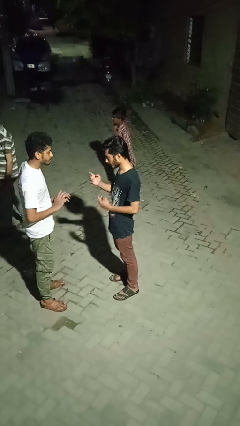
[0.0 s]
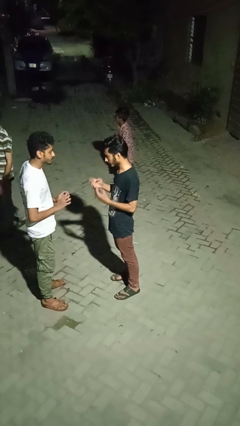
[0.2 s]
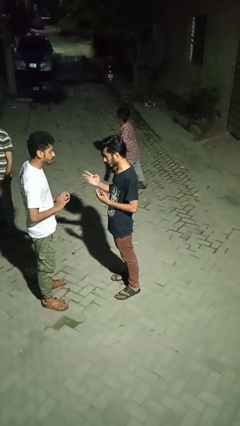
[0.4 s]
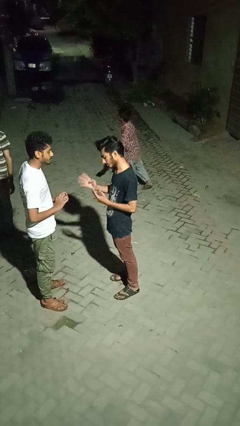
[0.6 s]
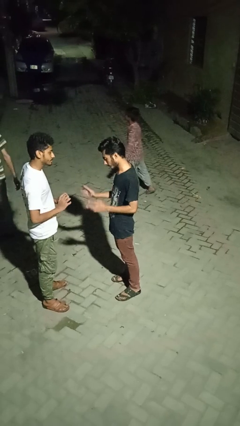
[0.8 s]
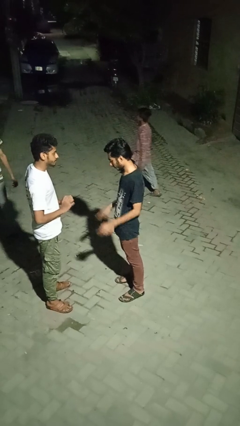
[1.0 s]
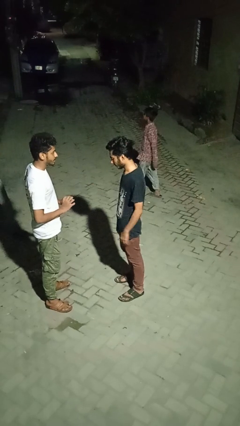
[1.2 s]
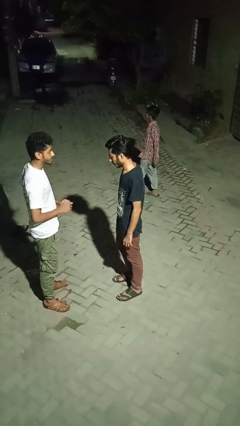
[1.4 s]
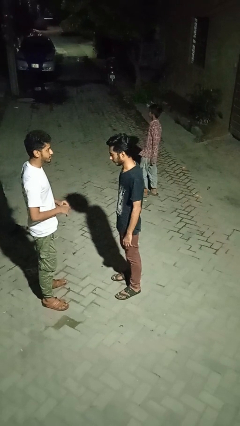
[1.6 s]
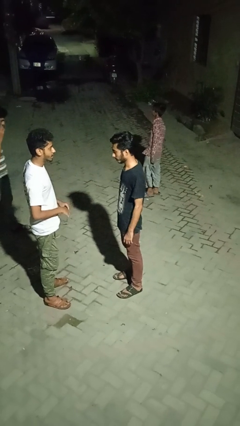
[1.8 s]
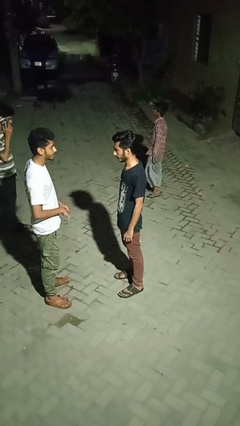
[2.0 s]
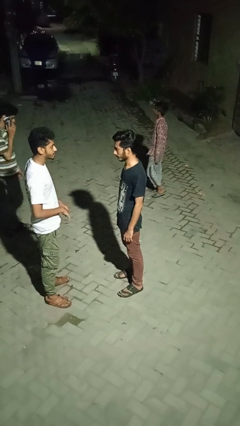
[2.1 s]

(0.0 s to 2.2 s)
person talks to person

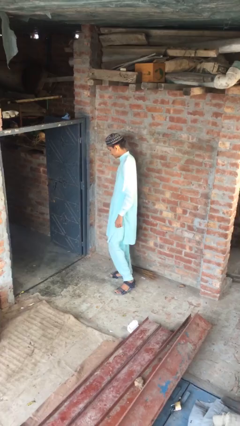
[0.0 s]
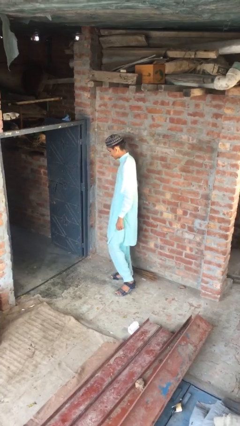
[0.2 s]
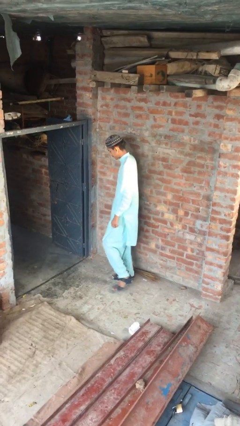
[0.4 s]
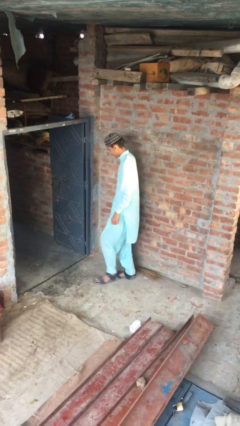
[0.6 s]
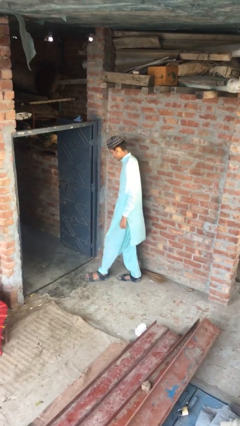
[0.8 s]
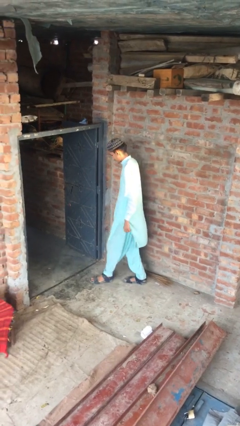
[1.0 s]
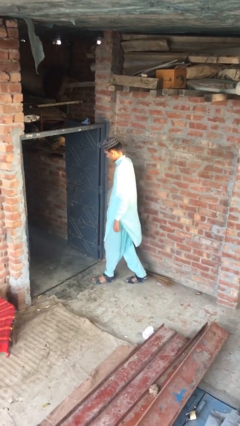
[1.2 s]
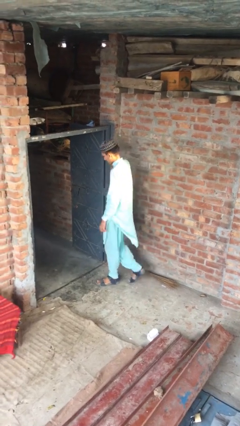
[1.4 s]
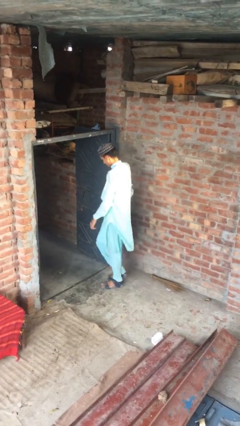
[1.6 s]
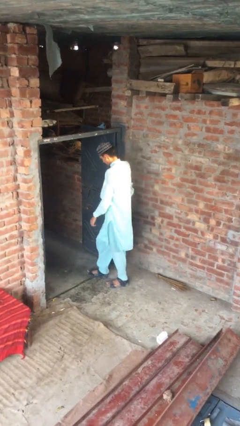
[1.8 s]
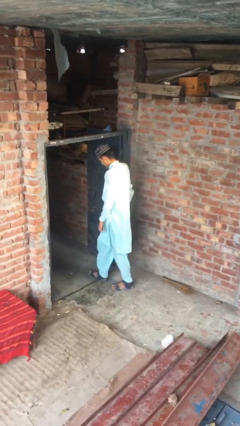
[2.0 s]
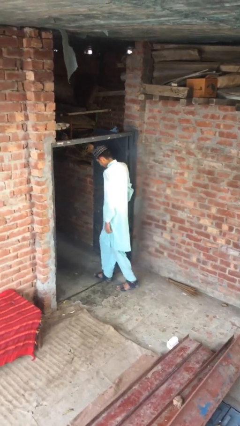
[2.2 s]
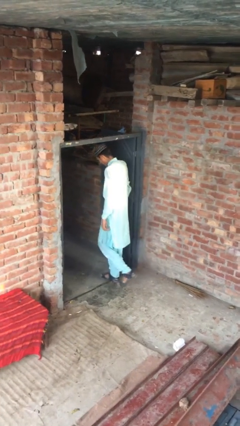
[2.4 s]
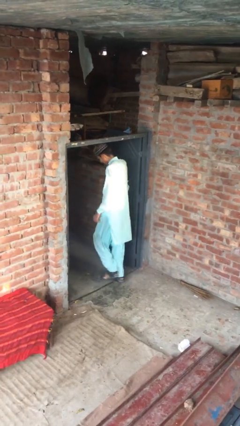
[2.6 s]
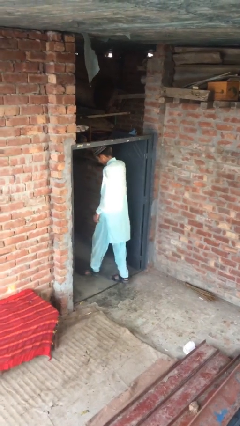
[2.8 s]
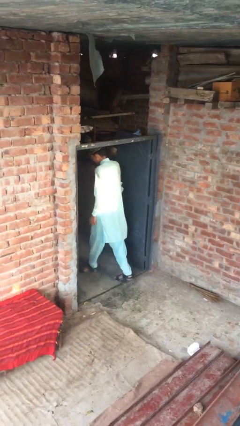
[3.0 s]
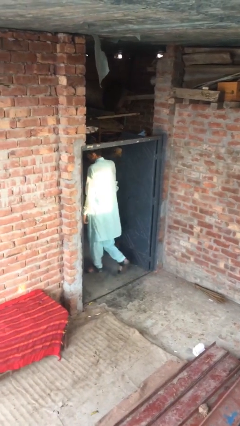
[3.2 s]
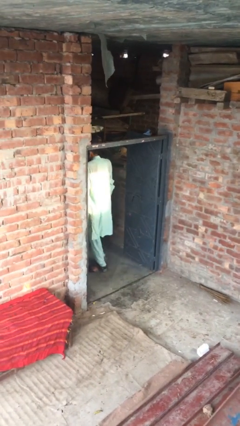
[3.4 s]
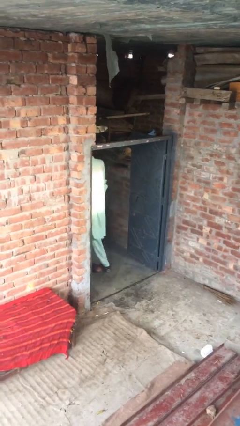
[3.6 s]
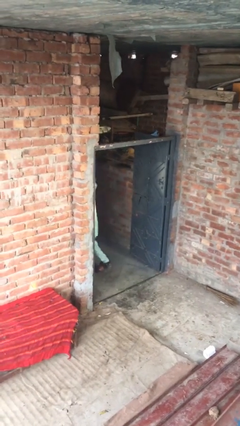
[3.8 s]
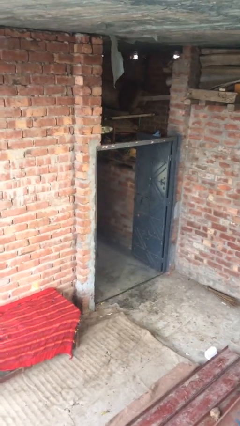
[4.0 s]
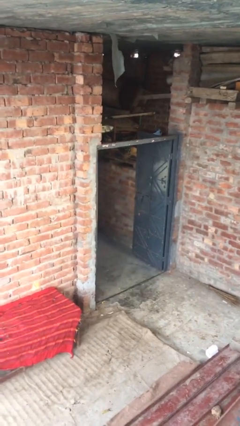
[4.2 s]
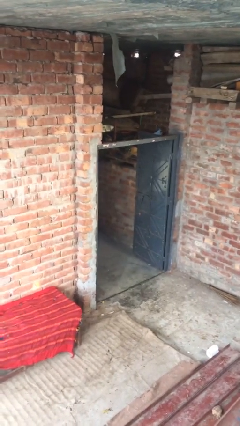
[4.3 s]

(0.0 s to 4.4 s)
person exits scene through structure

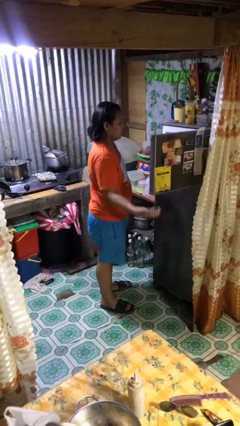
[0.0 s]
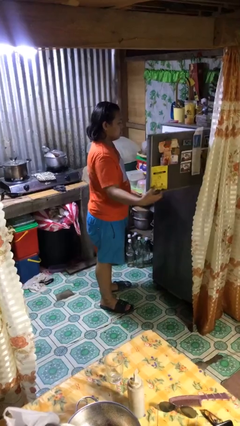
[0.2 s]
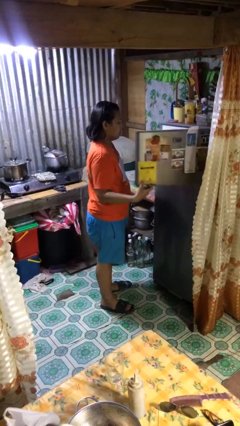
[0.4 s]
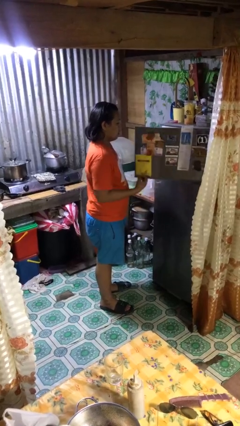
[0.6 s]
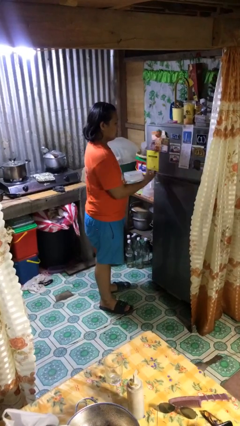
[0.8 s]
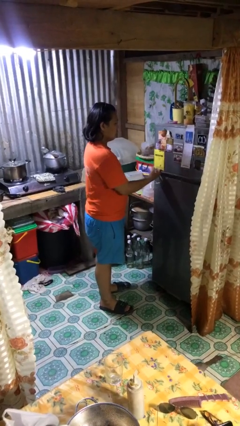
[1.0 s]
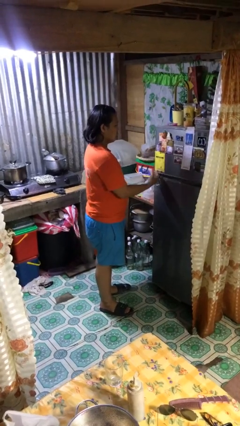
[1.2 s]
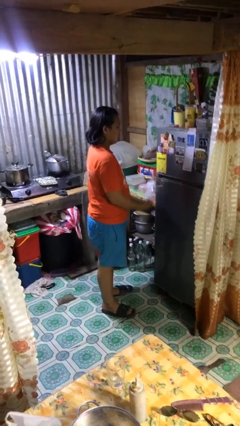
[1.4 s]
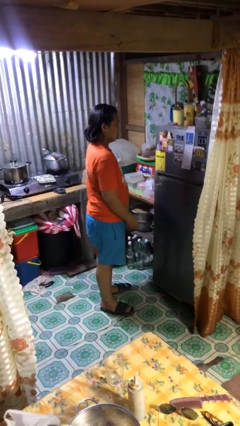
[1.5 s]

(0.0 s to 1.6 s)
person closes refrigerator

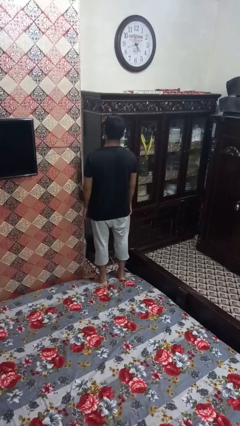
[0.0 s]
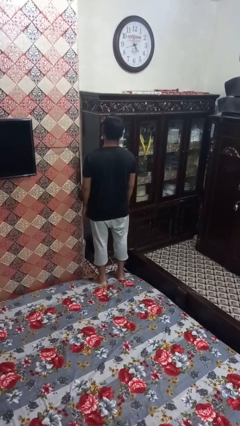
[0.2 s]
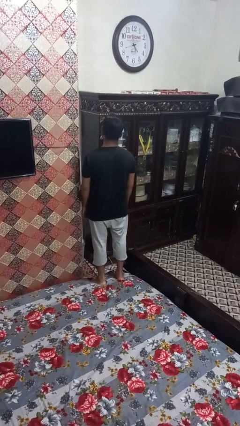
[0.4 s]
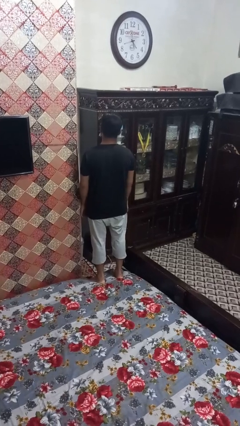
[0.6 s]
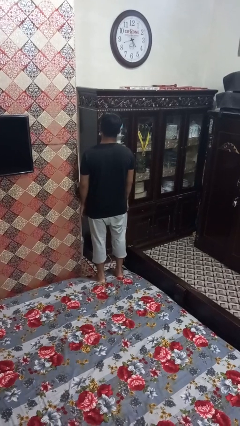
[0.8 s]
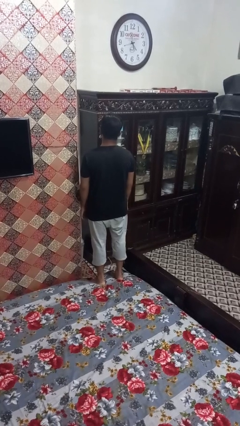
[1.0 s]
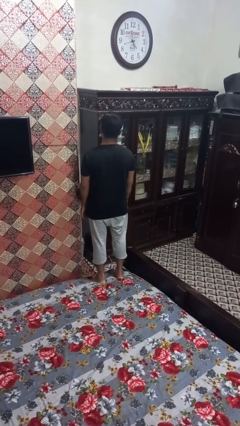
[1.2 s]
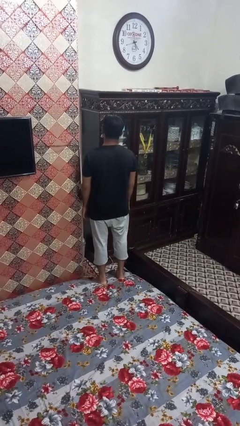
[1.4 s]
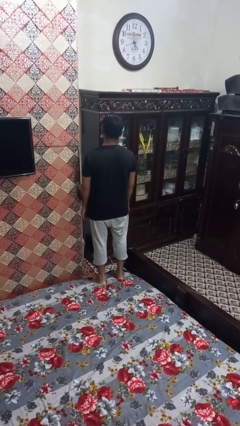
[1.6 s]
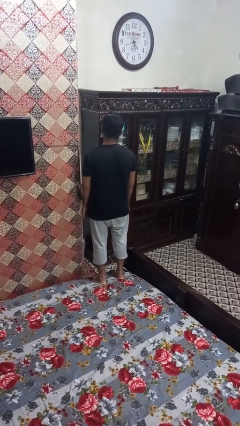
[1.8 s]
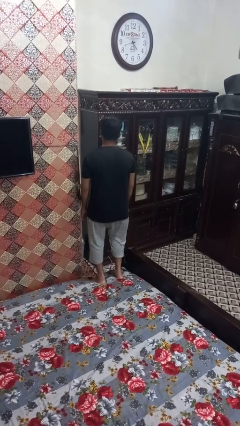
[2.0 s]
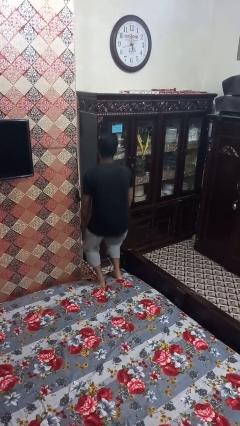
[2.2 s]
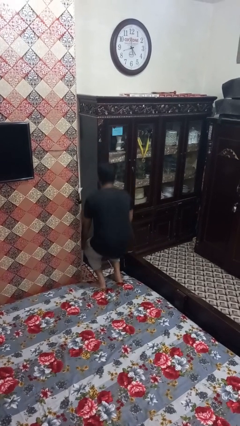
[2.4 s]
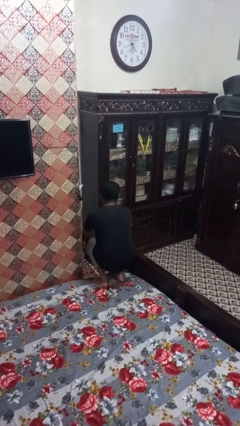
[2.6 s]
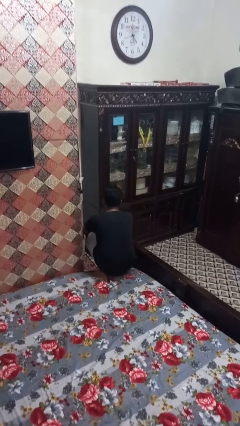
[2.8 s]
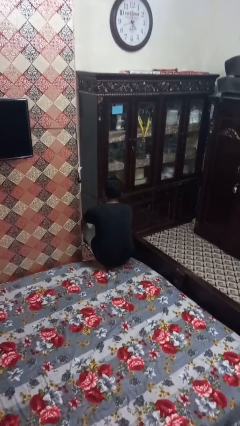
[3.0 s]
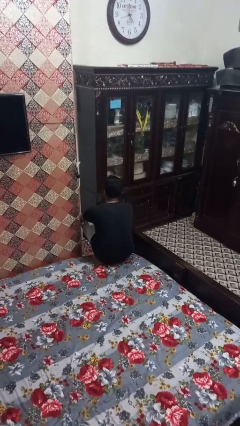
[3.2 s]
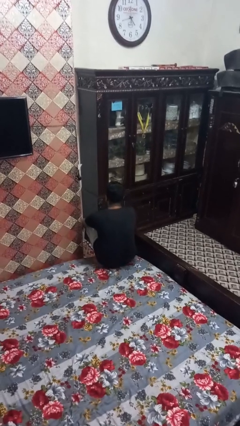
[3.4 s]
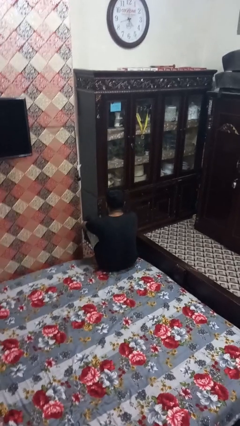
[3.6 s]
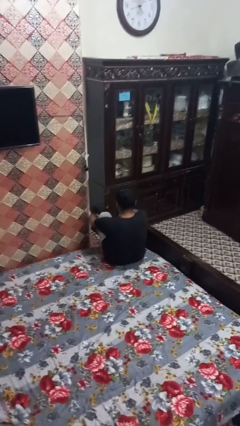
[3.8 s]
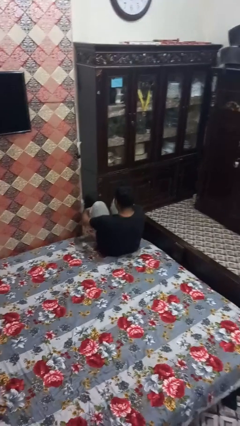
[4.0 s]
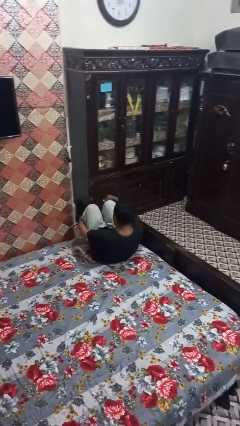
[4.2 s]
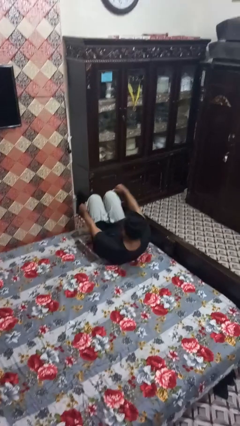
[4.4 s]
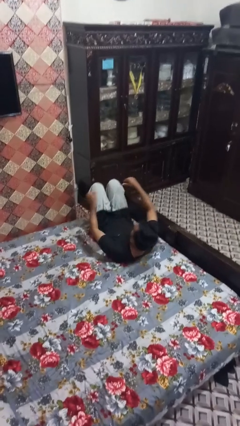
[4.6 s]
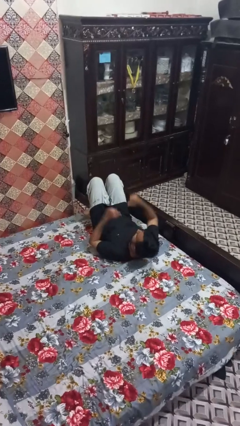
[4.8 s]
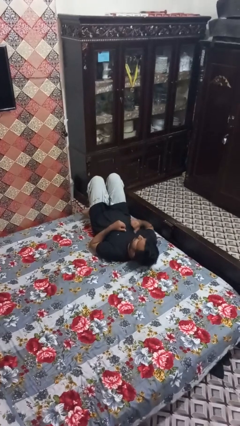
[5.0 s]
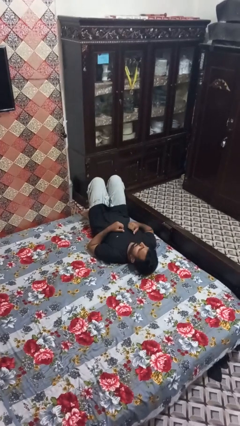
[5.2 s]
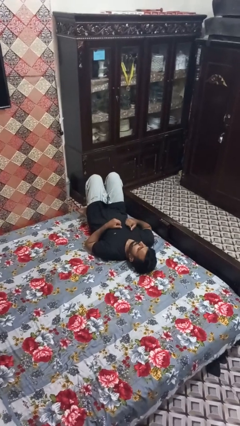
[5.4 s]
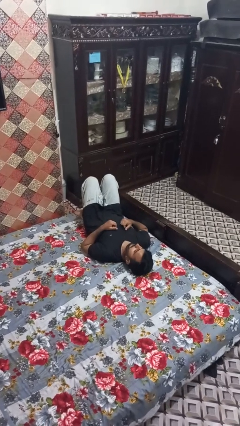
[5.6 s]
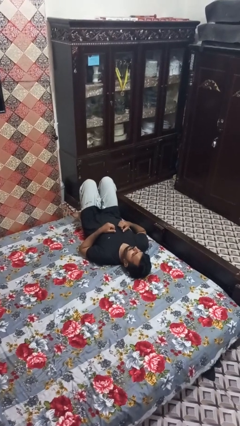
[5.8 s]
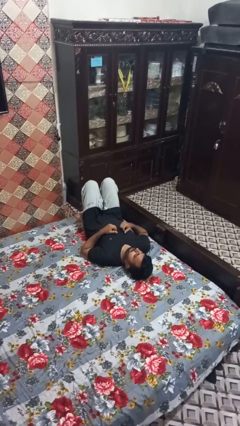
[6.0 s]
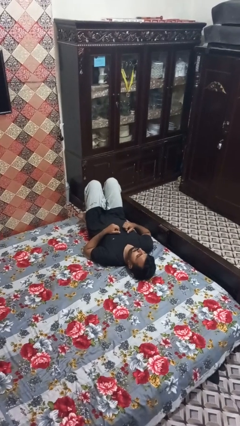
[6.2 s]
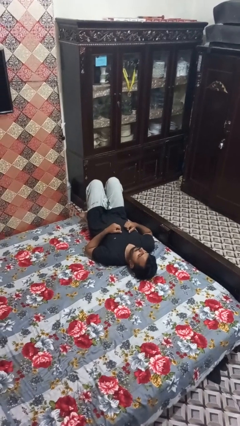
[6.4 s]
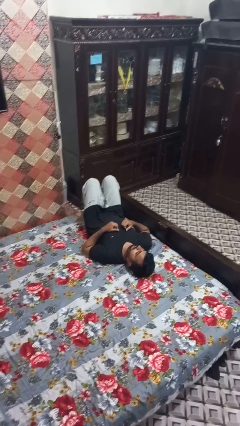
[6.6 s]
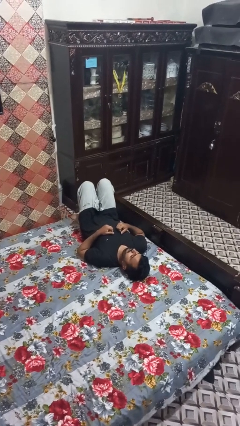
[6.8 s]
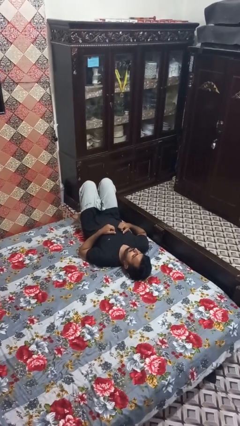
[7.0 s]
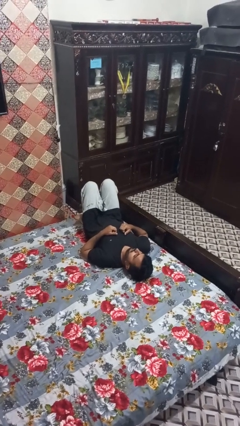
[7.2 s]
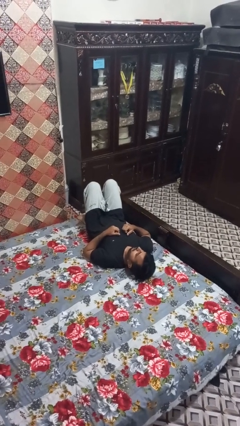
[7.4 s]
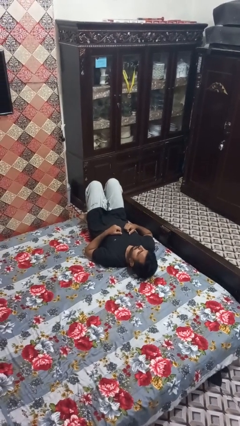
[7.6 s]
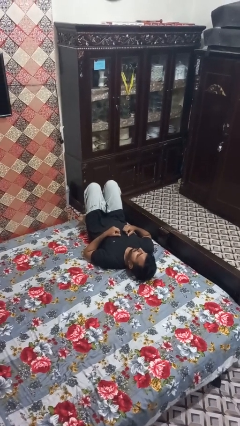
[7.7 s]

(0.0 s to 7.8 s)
person lies down on bed

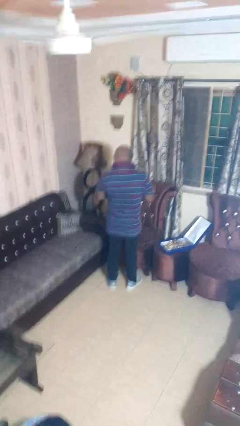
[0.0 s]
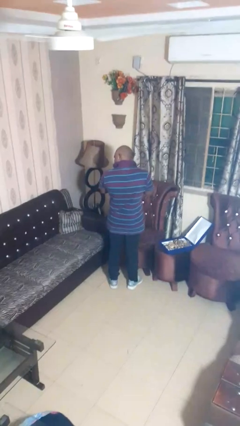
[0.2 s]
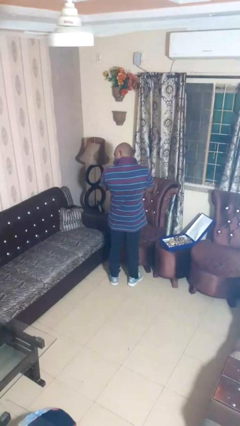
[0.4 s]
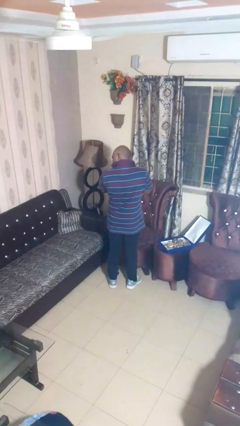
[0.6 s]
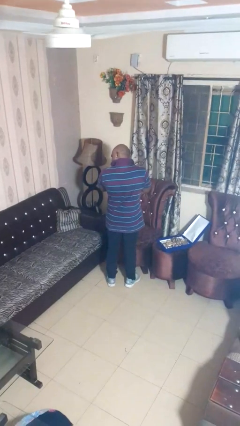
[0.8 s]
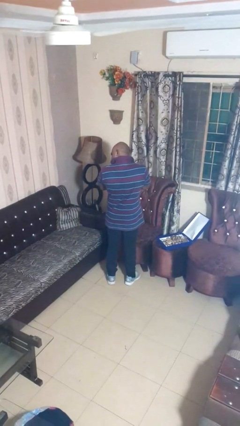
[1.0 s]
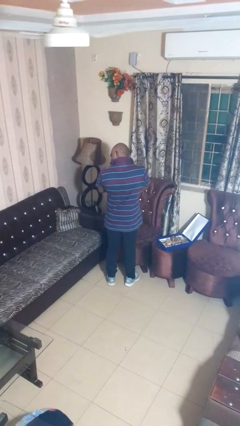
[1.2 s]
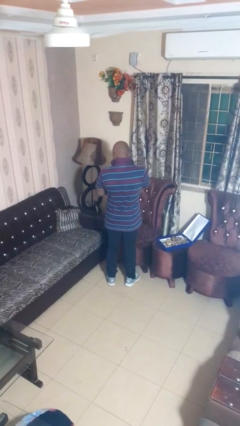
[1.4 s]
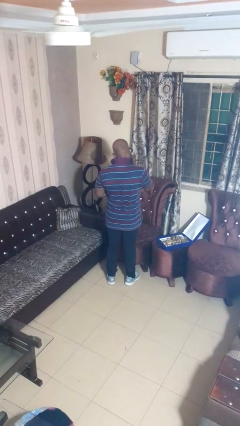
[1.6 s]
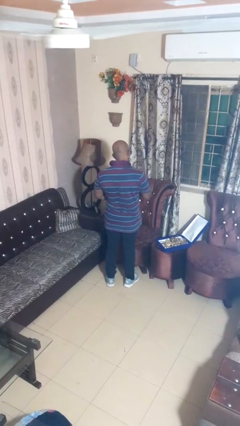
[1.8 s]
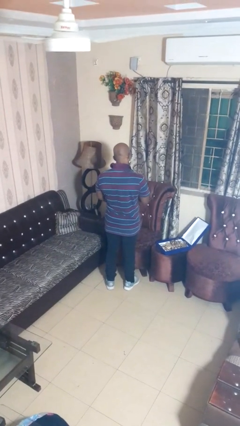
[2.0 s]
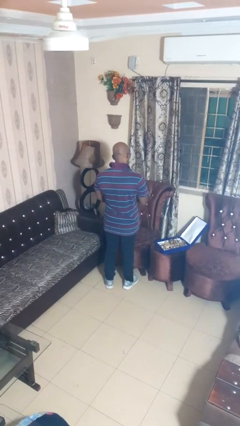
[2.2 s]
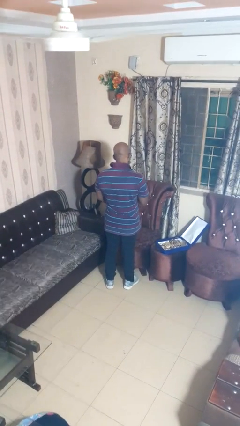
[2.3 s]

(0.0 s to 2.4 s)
person puts on earrings
